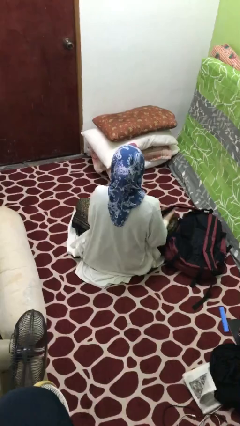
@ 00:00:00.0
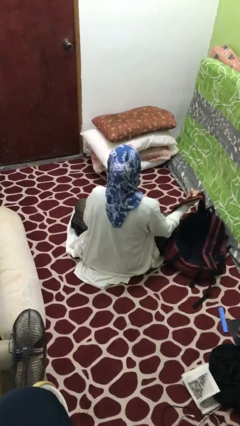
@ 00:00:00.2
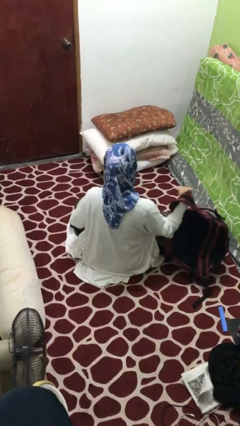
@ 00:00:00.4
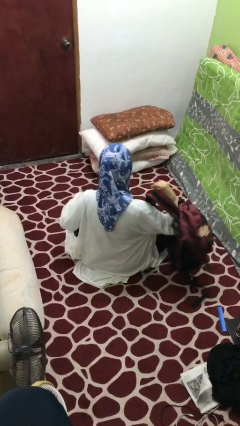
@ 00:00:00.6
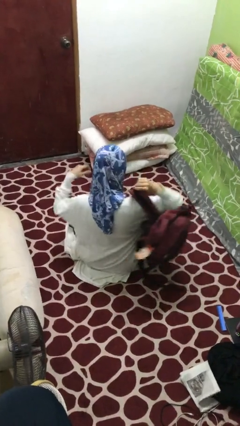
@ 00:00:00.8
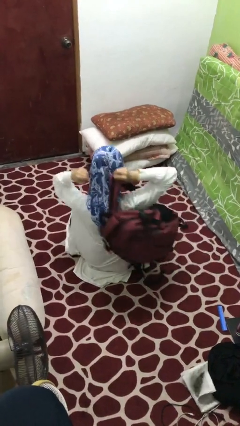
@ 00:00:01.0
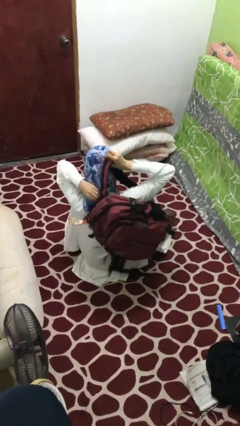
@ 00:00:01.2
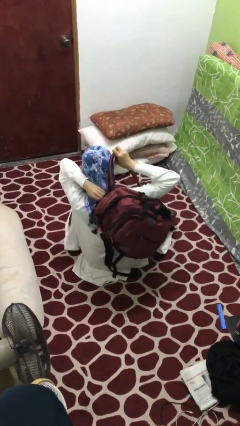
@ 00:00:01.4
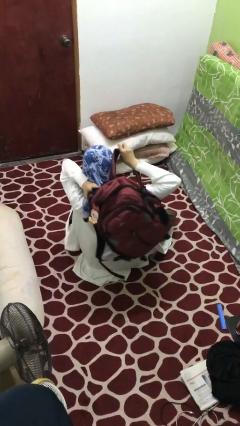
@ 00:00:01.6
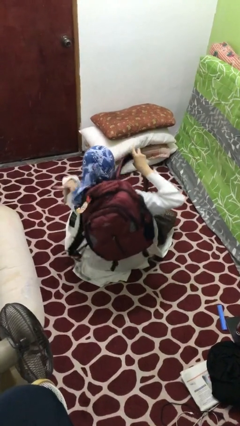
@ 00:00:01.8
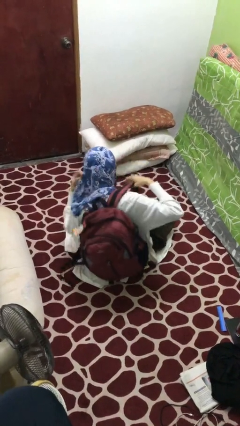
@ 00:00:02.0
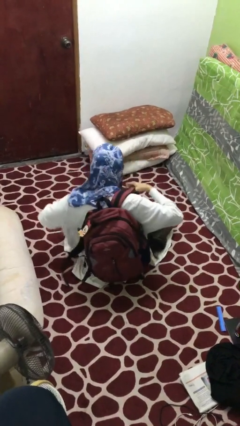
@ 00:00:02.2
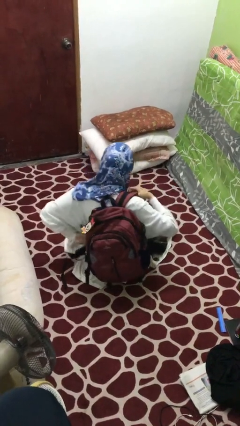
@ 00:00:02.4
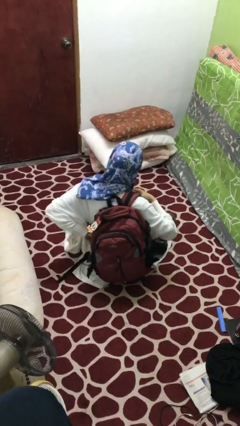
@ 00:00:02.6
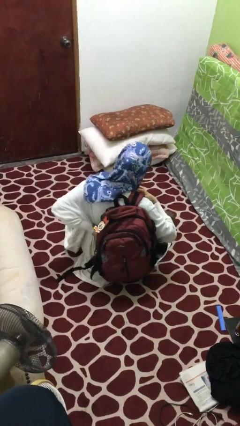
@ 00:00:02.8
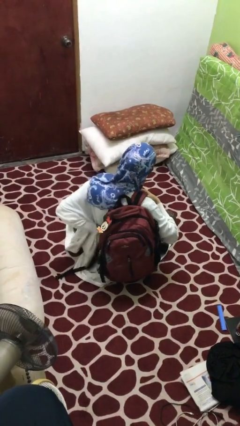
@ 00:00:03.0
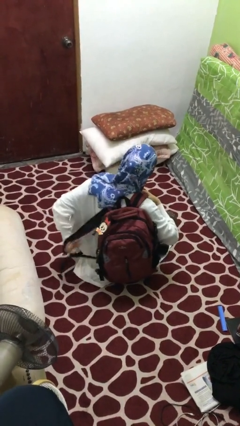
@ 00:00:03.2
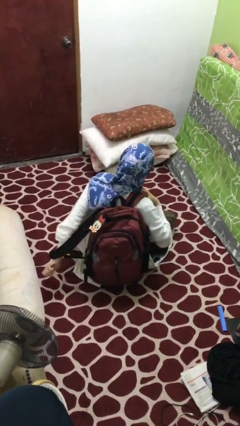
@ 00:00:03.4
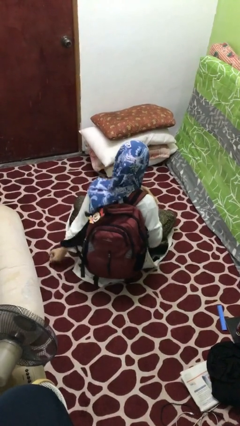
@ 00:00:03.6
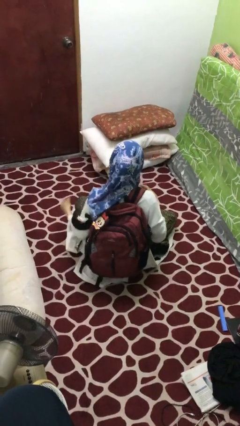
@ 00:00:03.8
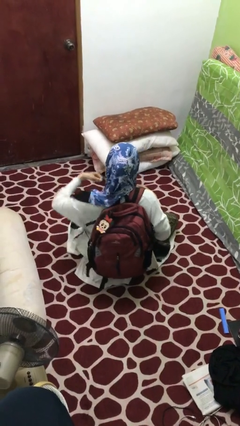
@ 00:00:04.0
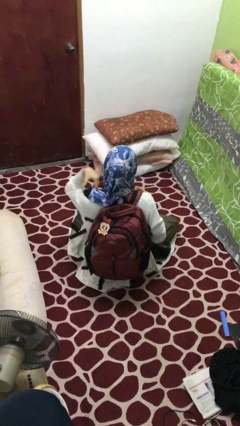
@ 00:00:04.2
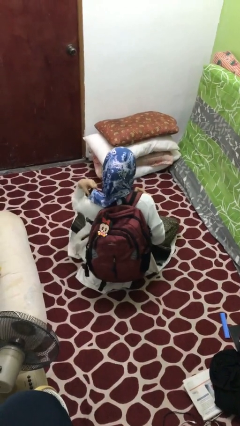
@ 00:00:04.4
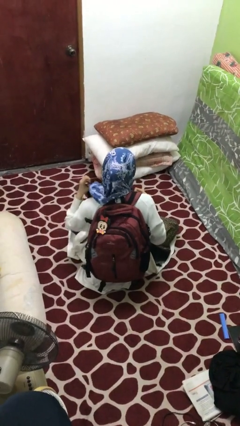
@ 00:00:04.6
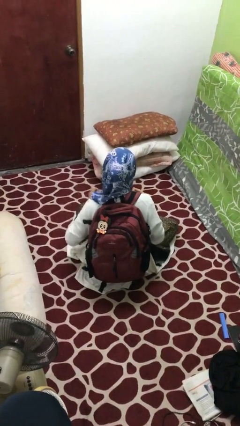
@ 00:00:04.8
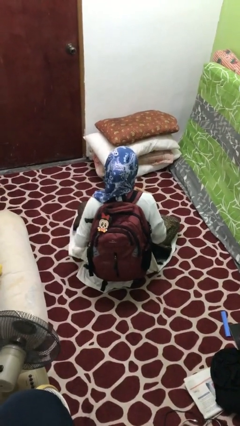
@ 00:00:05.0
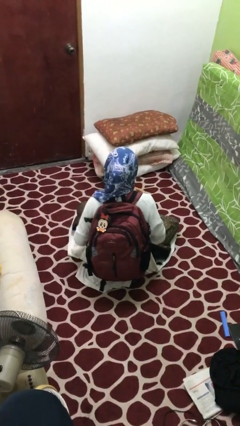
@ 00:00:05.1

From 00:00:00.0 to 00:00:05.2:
person puts on backpack

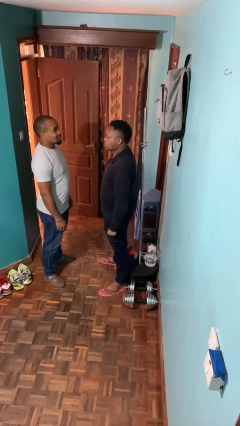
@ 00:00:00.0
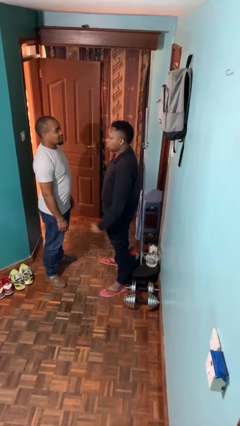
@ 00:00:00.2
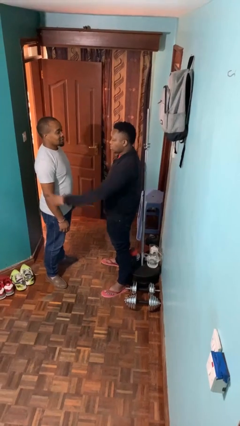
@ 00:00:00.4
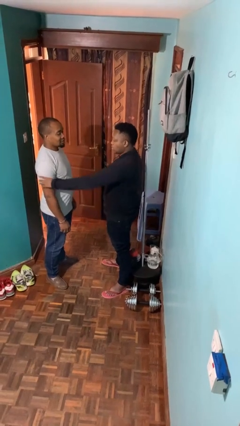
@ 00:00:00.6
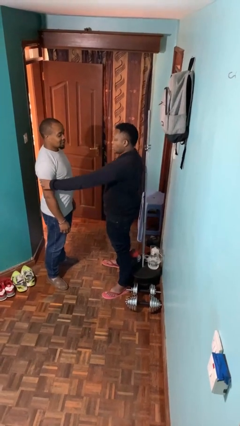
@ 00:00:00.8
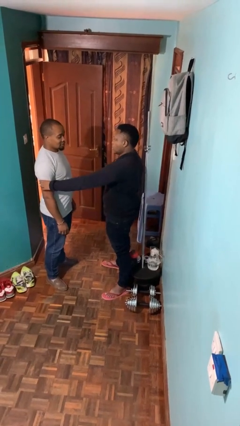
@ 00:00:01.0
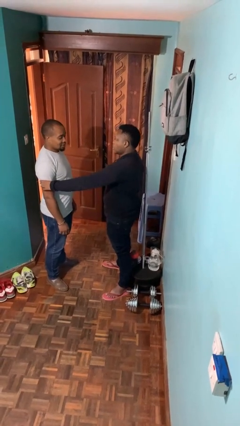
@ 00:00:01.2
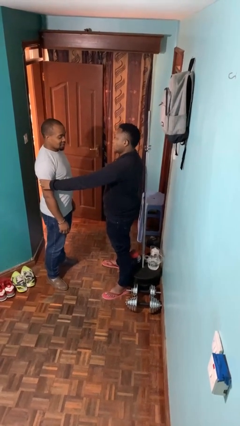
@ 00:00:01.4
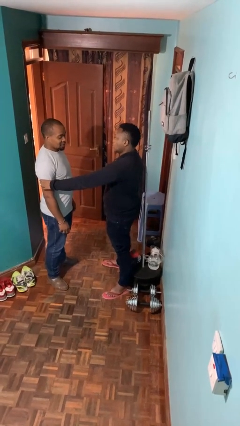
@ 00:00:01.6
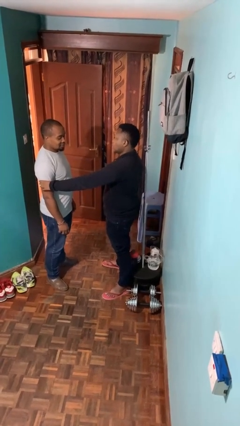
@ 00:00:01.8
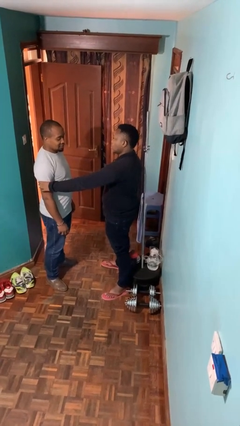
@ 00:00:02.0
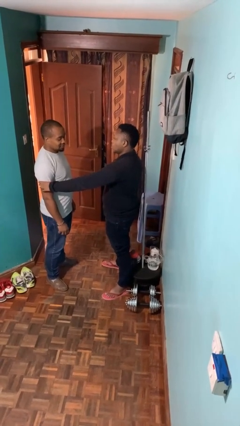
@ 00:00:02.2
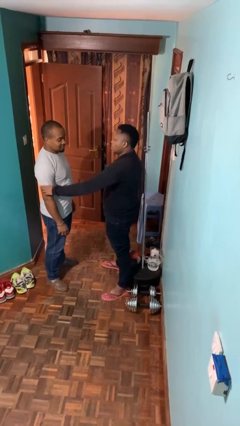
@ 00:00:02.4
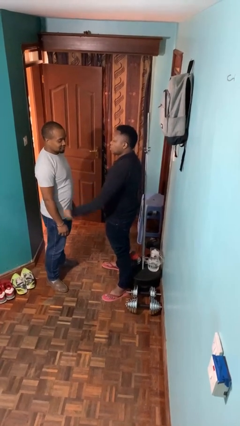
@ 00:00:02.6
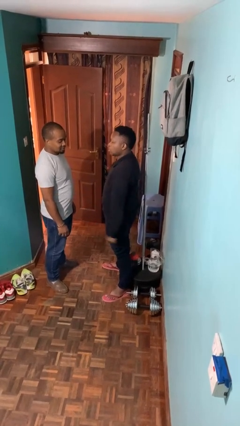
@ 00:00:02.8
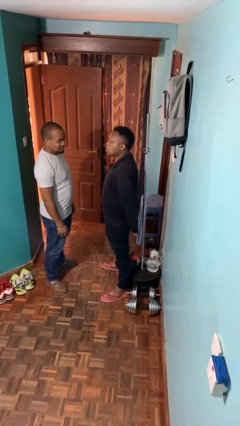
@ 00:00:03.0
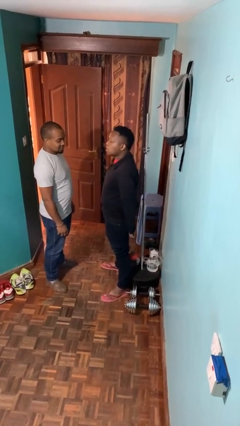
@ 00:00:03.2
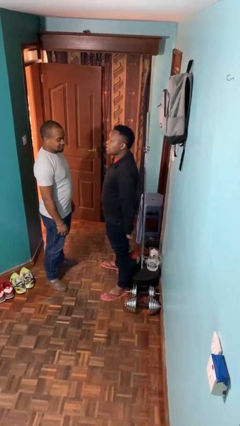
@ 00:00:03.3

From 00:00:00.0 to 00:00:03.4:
person grabs person by bicep

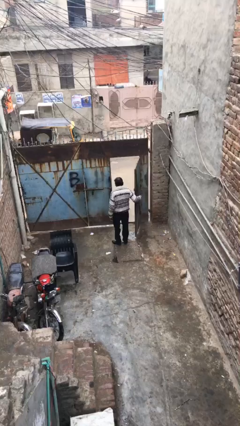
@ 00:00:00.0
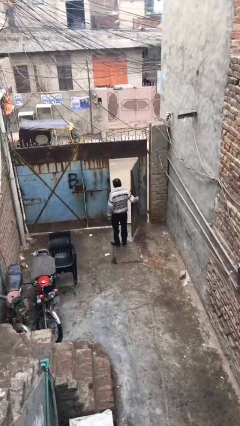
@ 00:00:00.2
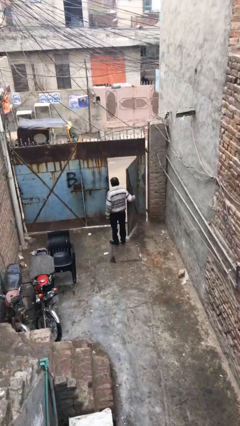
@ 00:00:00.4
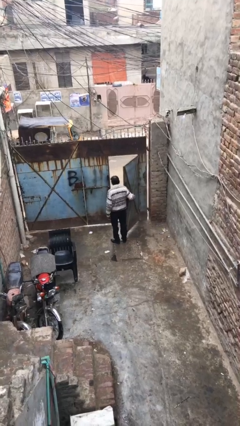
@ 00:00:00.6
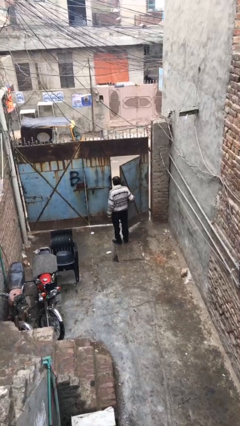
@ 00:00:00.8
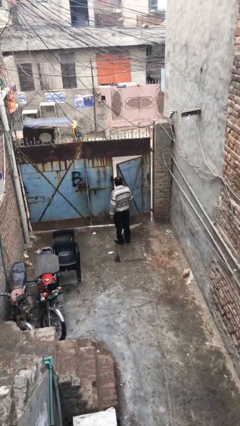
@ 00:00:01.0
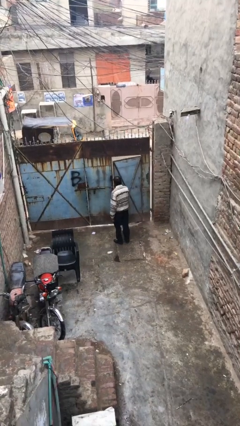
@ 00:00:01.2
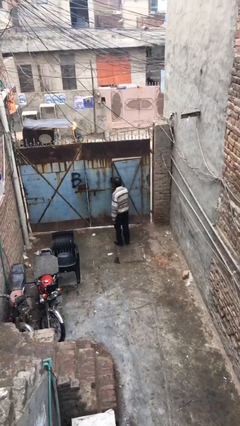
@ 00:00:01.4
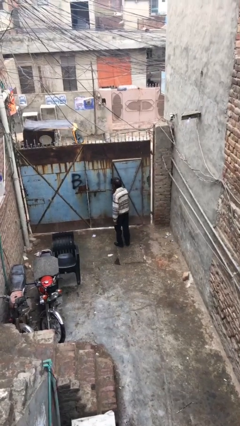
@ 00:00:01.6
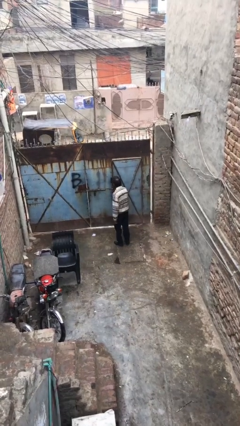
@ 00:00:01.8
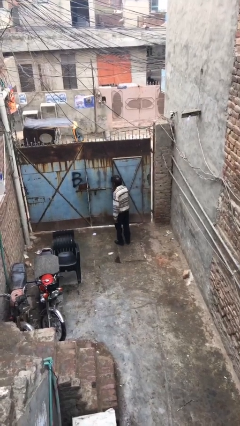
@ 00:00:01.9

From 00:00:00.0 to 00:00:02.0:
person closes facility door

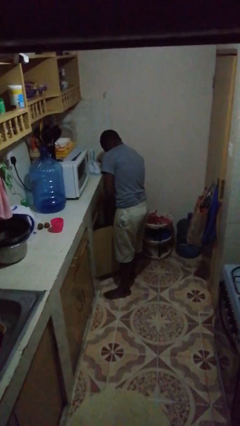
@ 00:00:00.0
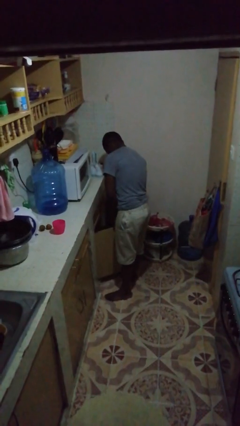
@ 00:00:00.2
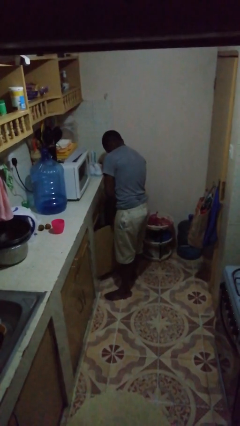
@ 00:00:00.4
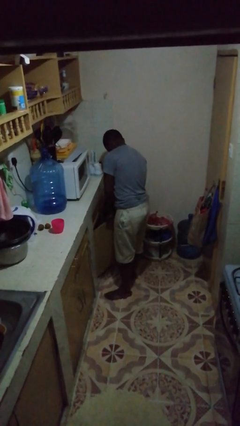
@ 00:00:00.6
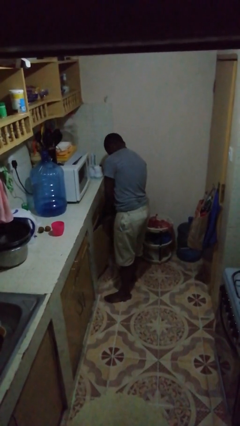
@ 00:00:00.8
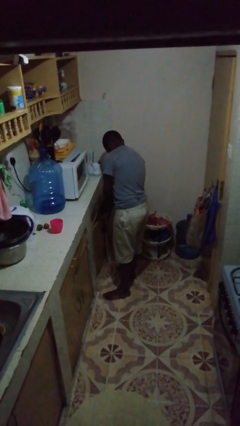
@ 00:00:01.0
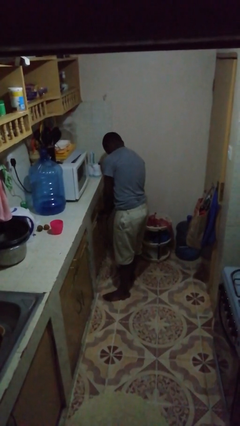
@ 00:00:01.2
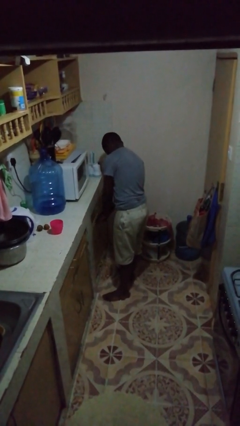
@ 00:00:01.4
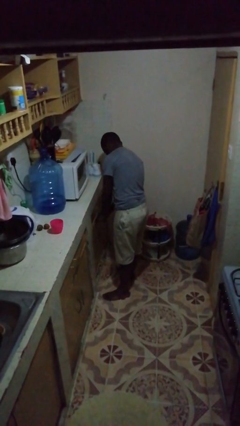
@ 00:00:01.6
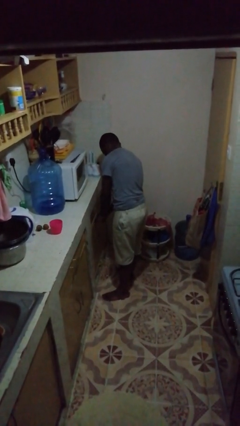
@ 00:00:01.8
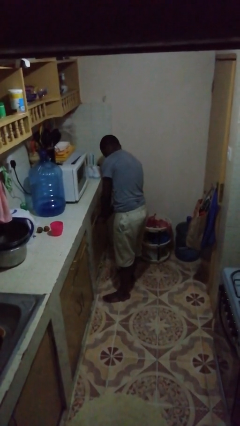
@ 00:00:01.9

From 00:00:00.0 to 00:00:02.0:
person closes cabinet

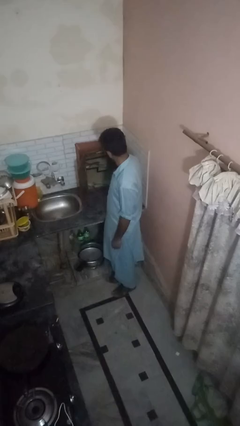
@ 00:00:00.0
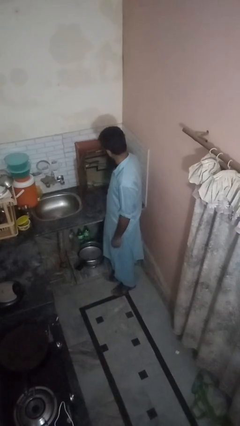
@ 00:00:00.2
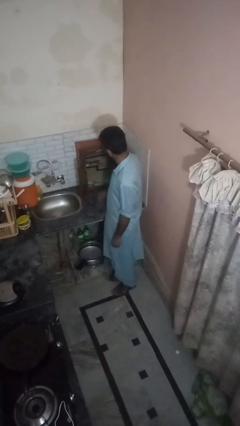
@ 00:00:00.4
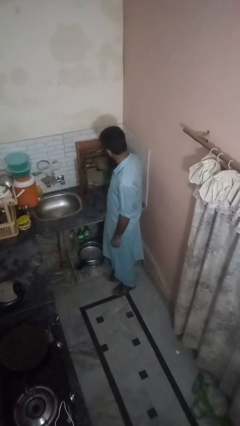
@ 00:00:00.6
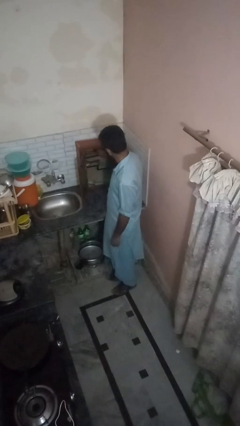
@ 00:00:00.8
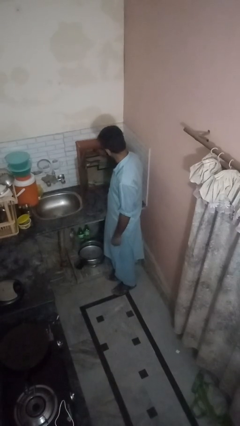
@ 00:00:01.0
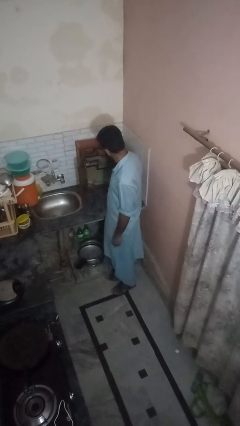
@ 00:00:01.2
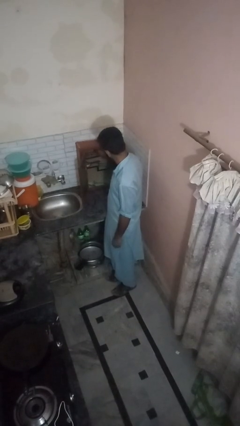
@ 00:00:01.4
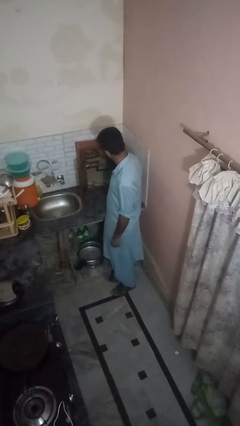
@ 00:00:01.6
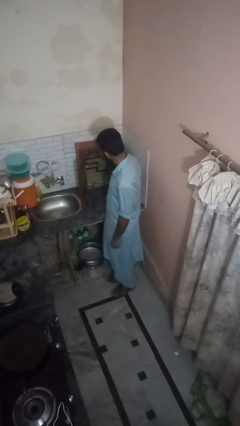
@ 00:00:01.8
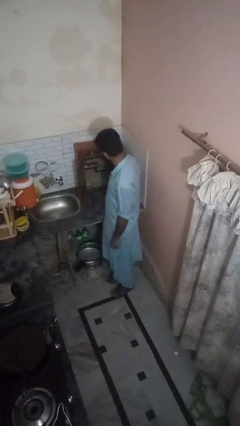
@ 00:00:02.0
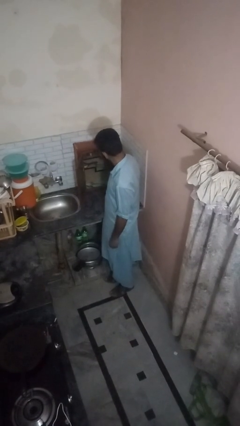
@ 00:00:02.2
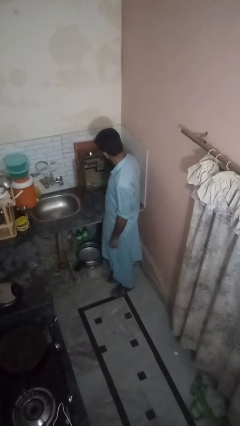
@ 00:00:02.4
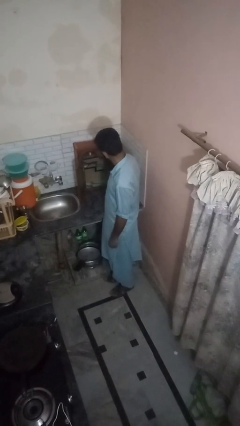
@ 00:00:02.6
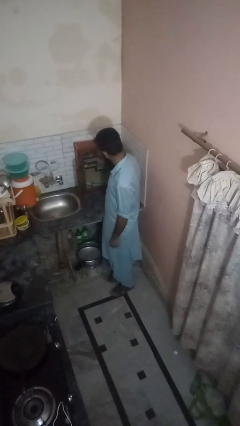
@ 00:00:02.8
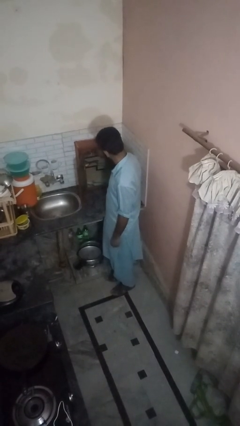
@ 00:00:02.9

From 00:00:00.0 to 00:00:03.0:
person searches in kitchen drawer

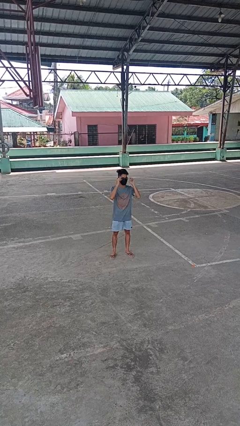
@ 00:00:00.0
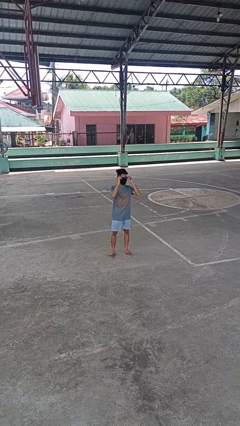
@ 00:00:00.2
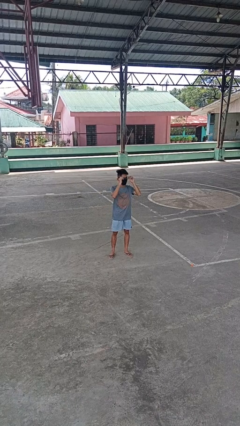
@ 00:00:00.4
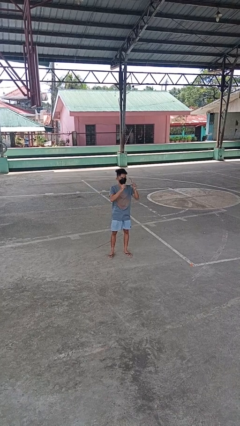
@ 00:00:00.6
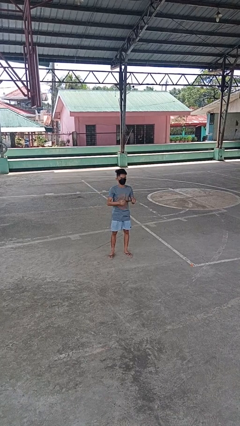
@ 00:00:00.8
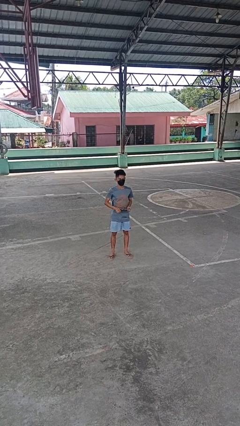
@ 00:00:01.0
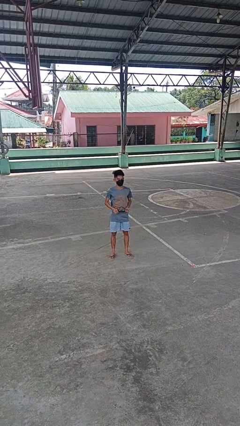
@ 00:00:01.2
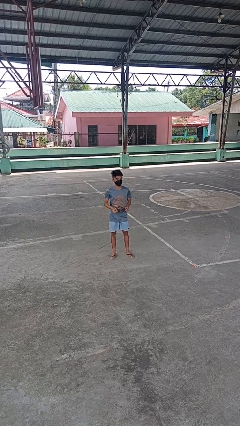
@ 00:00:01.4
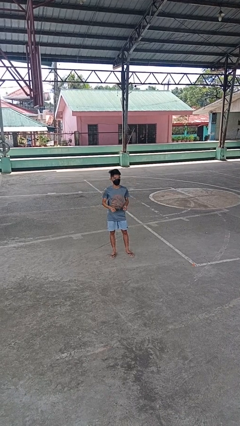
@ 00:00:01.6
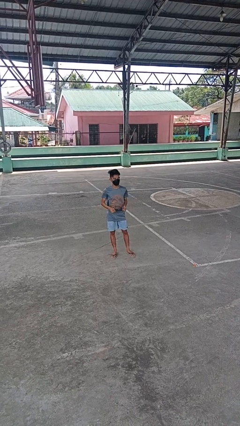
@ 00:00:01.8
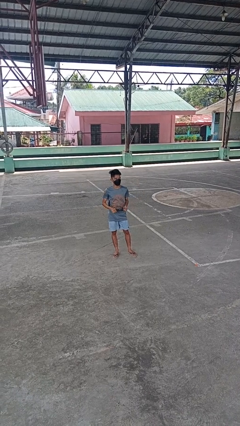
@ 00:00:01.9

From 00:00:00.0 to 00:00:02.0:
person takes off glasses
